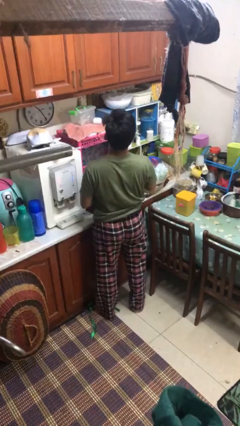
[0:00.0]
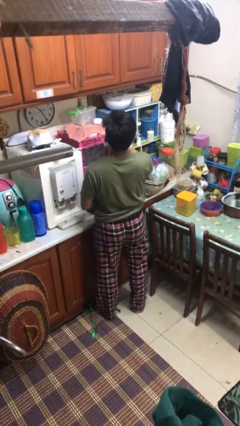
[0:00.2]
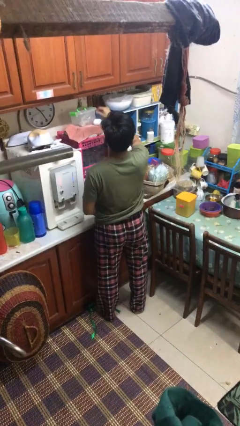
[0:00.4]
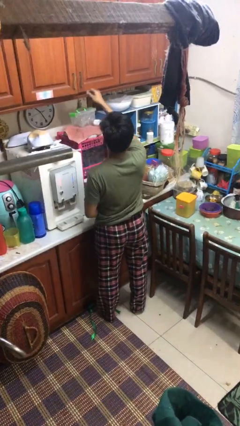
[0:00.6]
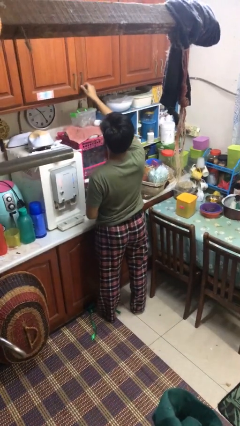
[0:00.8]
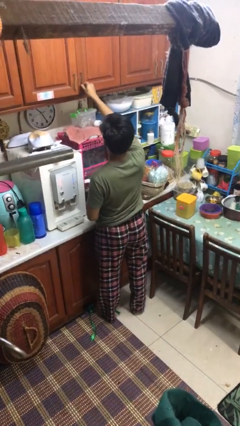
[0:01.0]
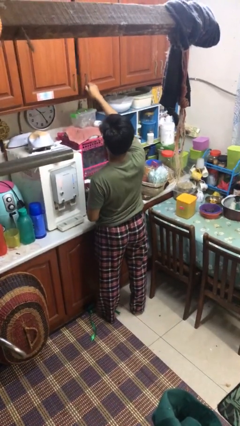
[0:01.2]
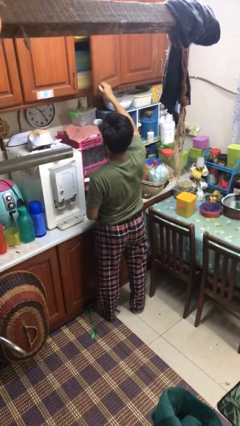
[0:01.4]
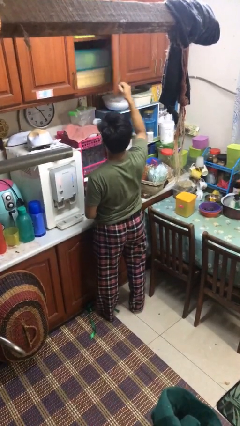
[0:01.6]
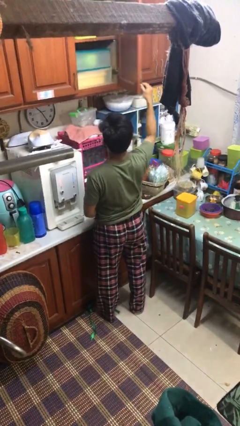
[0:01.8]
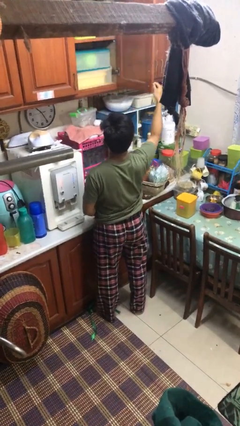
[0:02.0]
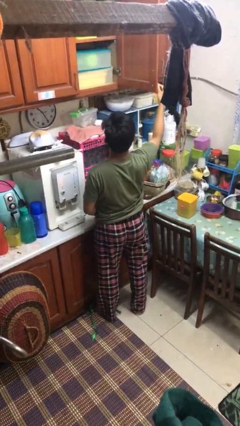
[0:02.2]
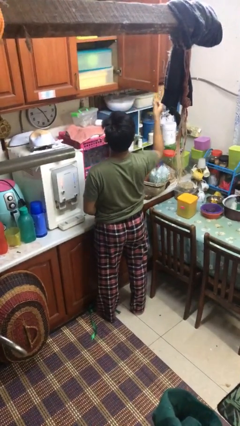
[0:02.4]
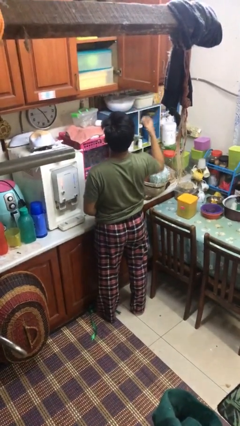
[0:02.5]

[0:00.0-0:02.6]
person opens kitchen drawer

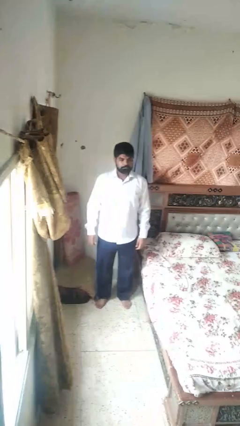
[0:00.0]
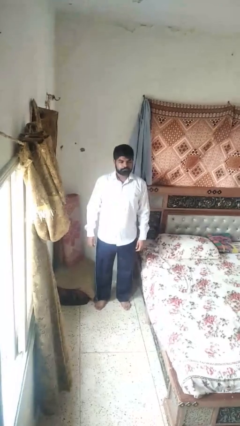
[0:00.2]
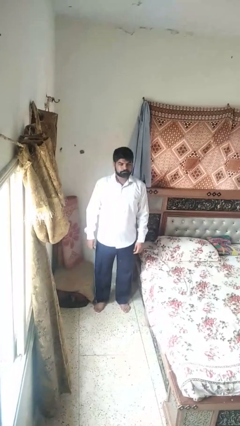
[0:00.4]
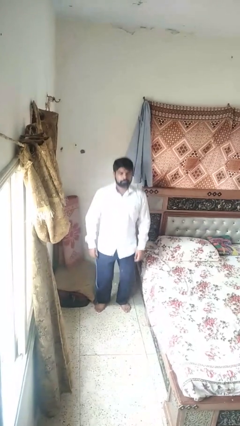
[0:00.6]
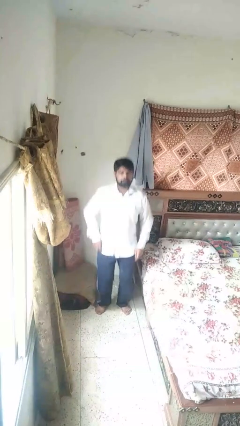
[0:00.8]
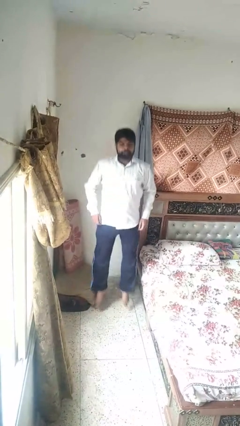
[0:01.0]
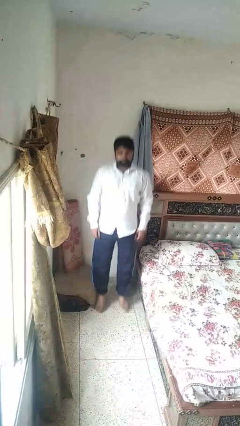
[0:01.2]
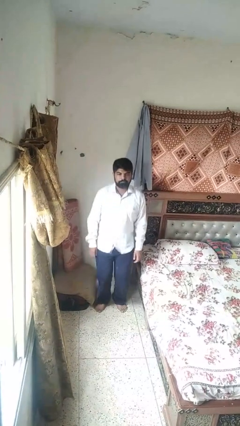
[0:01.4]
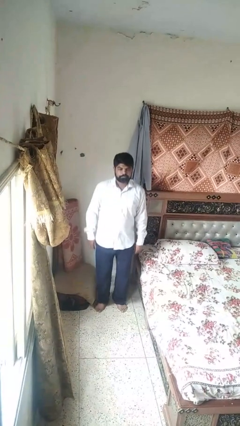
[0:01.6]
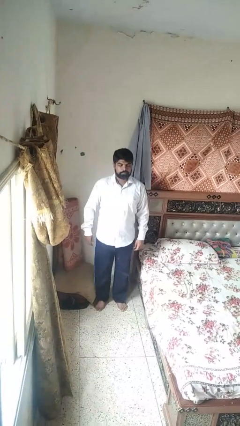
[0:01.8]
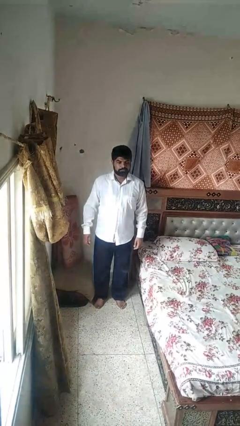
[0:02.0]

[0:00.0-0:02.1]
person jumps

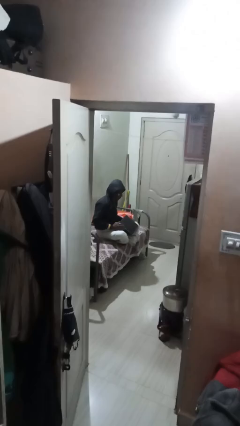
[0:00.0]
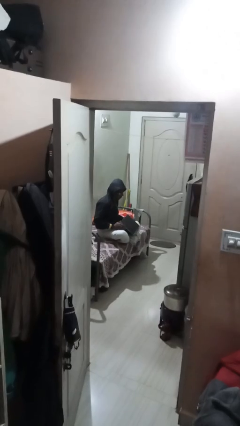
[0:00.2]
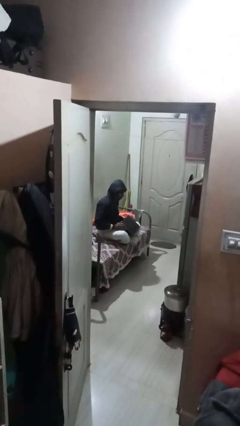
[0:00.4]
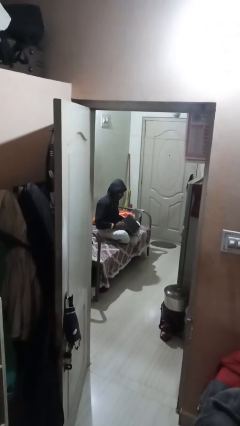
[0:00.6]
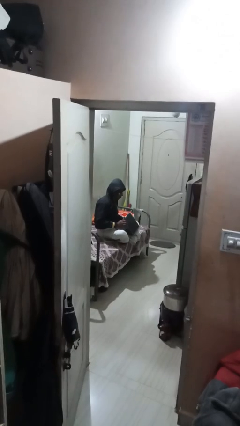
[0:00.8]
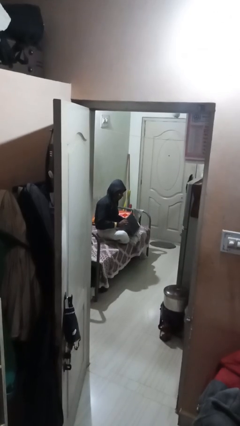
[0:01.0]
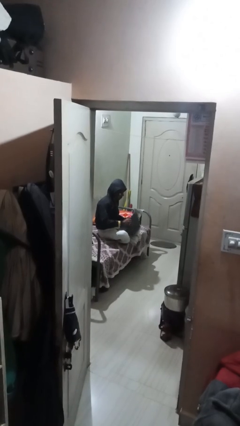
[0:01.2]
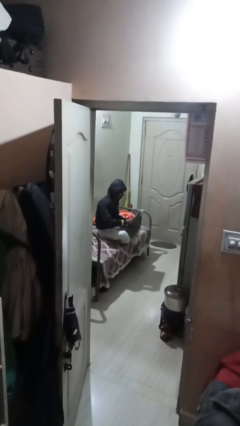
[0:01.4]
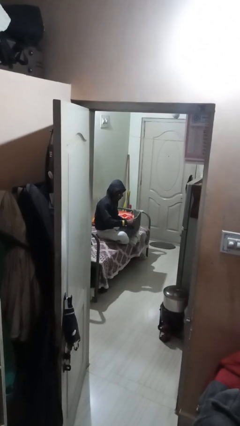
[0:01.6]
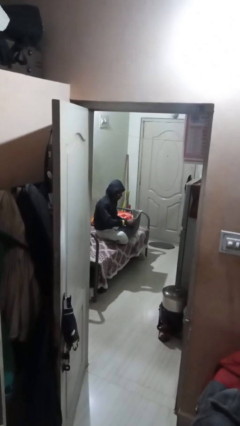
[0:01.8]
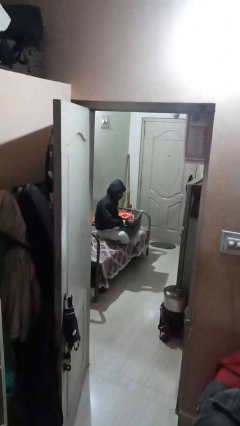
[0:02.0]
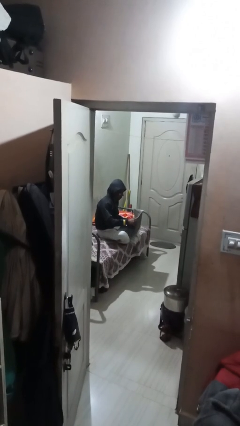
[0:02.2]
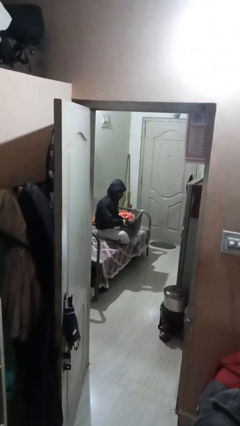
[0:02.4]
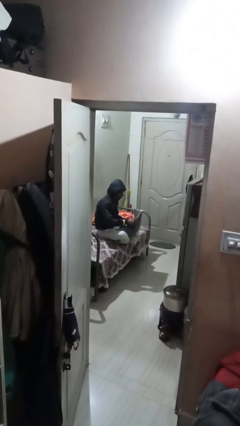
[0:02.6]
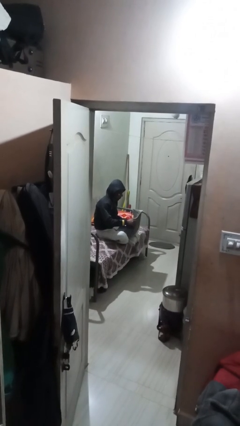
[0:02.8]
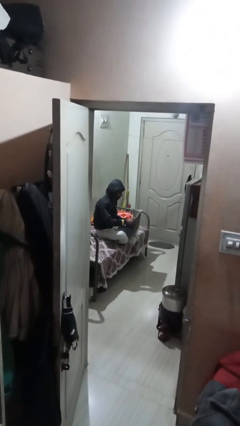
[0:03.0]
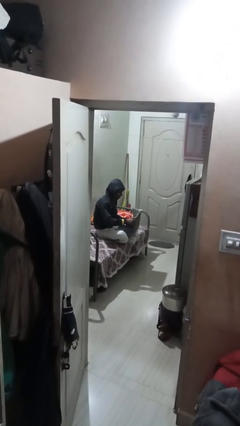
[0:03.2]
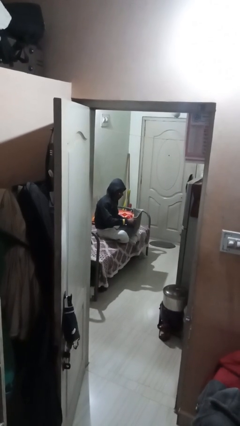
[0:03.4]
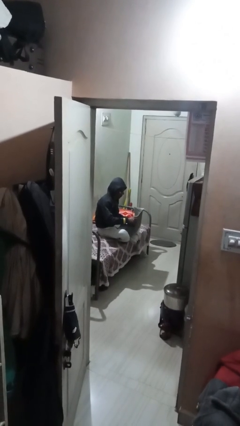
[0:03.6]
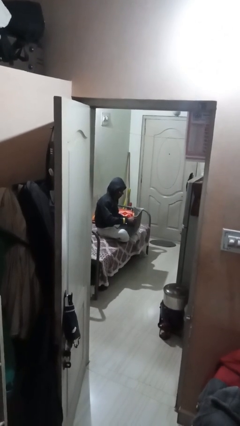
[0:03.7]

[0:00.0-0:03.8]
person interacts with laptop

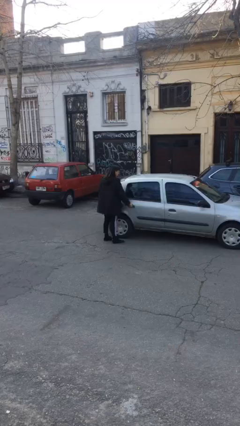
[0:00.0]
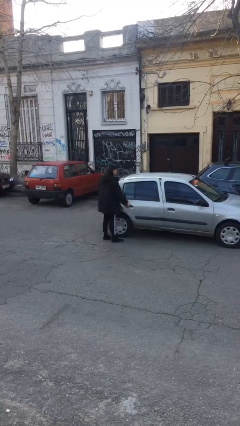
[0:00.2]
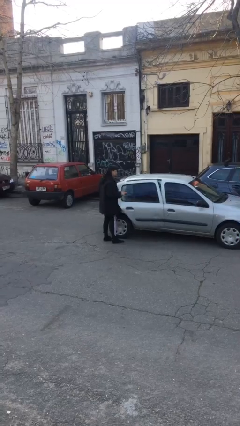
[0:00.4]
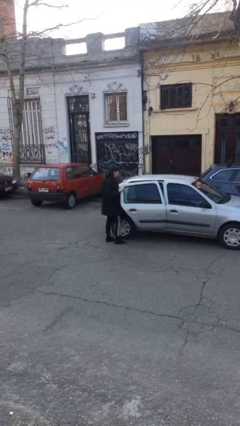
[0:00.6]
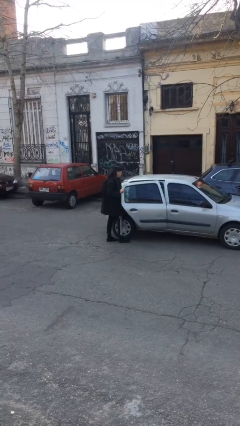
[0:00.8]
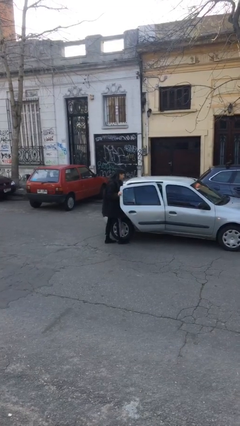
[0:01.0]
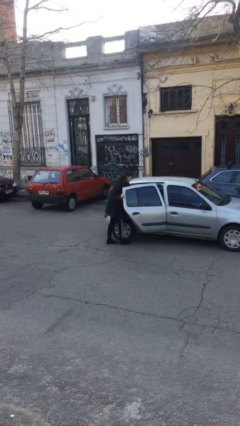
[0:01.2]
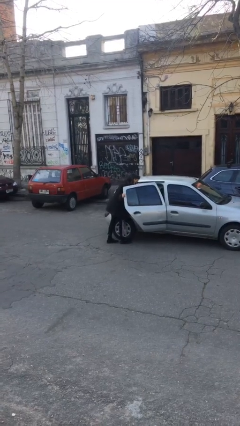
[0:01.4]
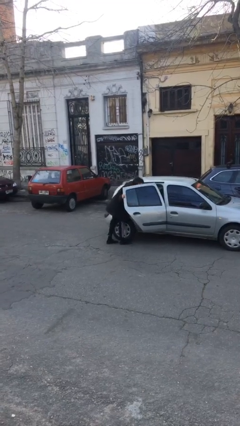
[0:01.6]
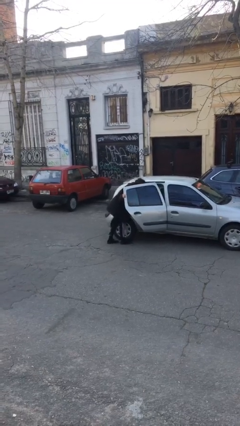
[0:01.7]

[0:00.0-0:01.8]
person opens car door

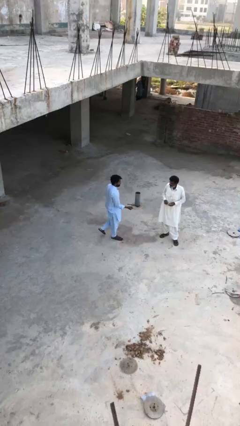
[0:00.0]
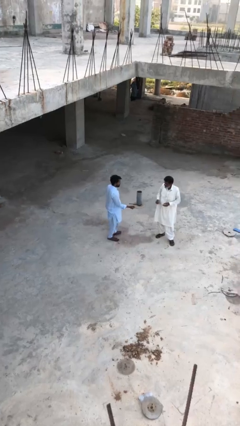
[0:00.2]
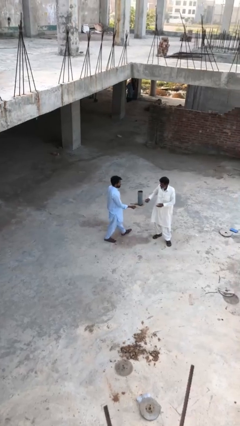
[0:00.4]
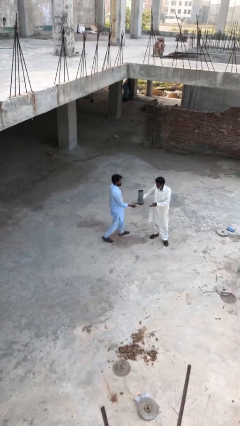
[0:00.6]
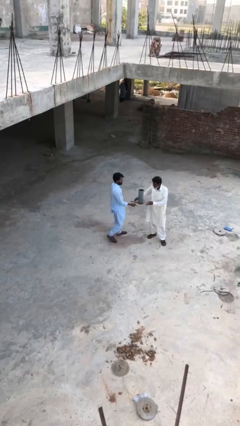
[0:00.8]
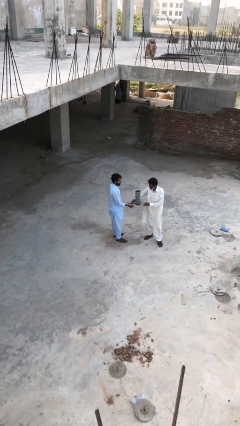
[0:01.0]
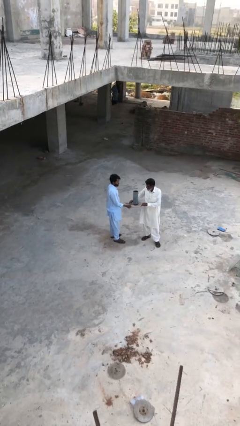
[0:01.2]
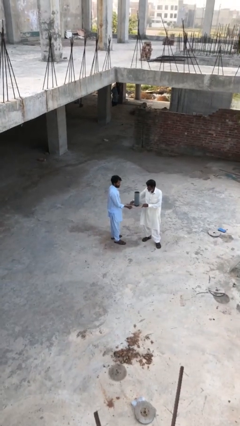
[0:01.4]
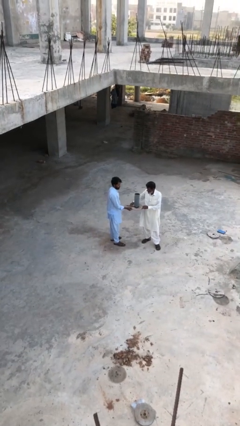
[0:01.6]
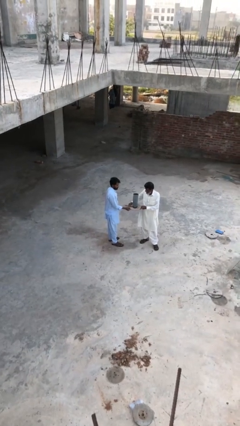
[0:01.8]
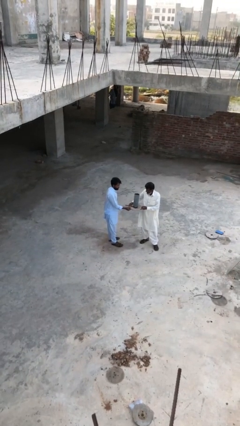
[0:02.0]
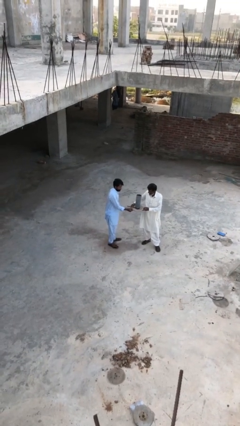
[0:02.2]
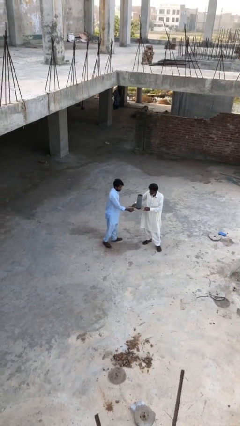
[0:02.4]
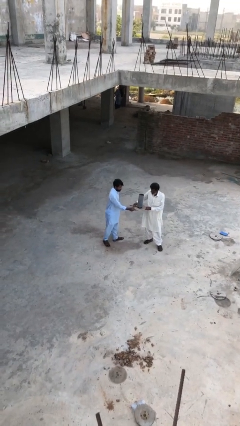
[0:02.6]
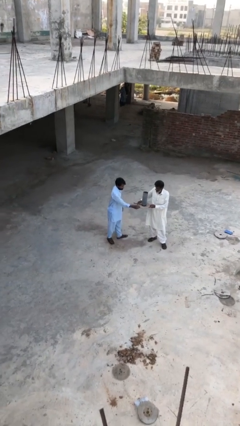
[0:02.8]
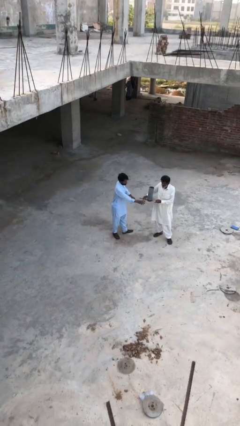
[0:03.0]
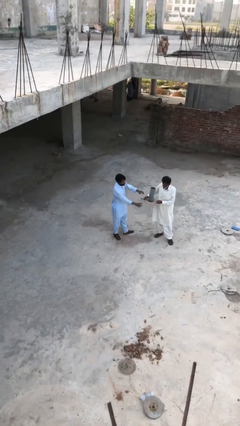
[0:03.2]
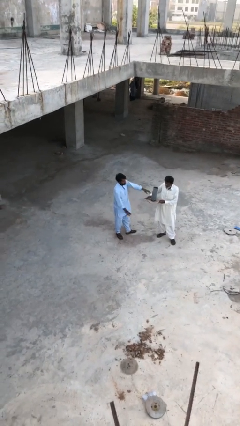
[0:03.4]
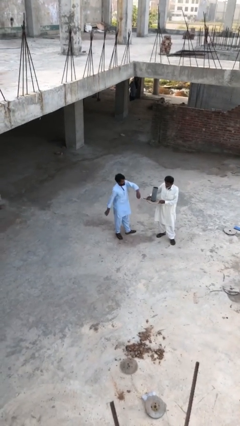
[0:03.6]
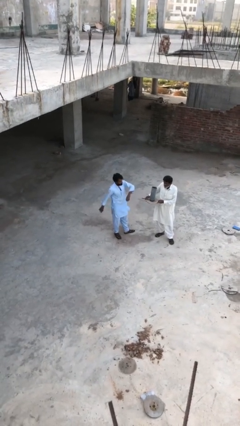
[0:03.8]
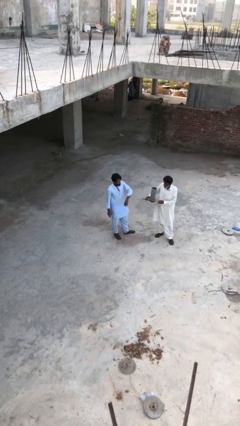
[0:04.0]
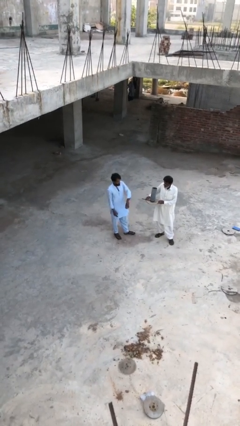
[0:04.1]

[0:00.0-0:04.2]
person transfers object to person

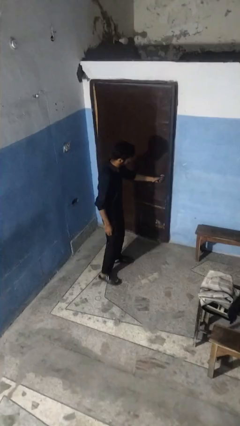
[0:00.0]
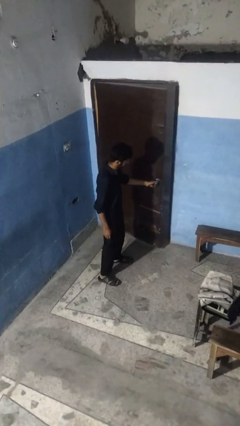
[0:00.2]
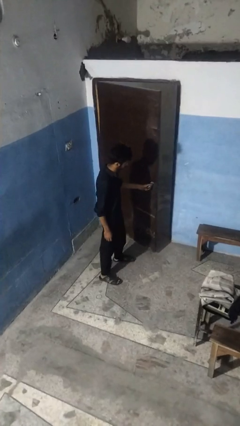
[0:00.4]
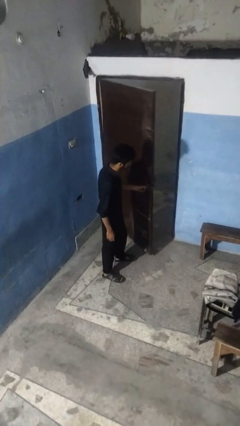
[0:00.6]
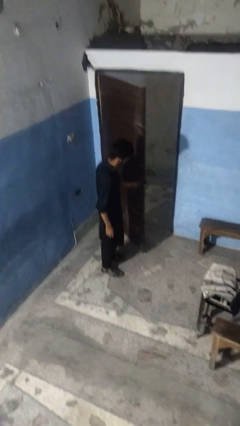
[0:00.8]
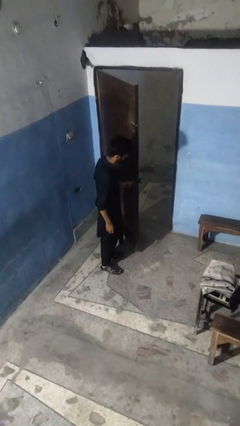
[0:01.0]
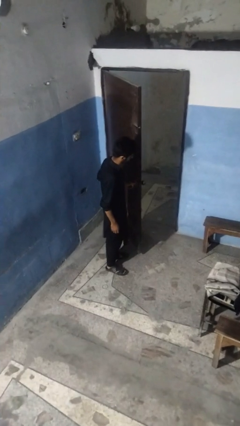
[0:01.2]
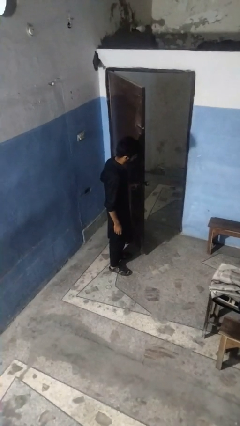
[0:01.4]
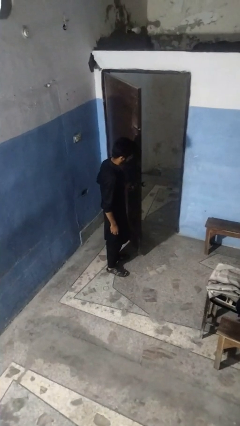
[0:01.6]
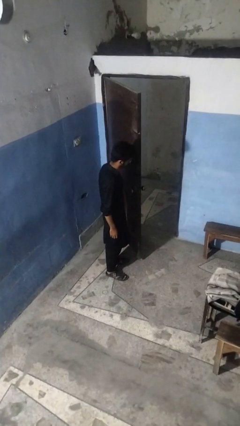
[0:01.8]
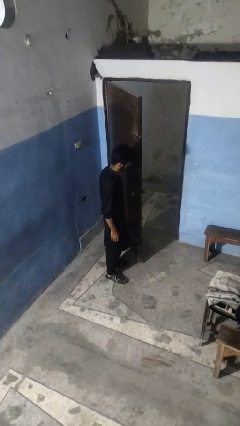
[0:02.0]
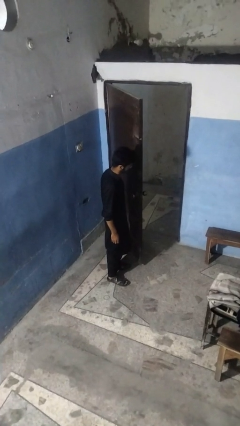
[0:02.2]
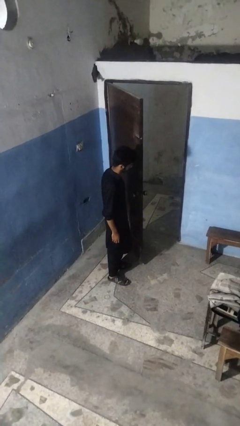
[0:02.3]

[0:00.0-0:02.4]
person opens facility door

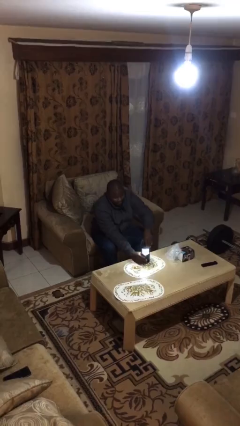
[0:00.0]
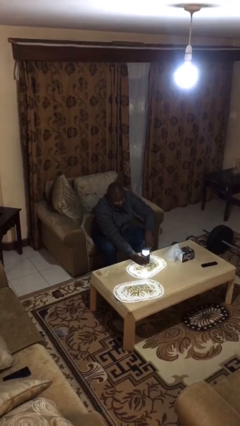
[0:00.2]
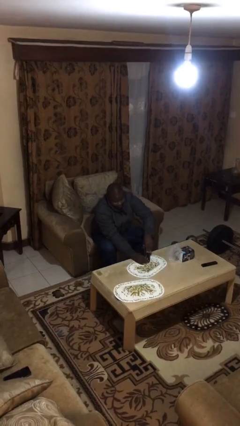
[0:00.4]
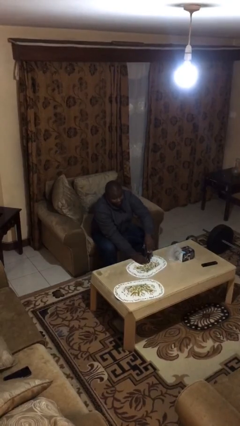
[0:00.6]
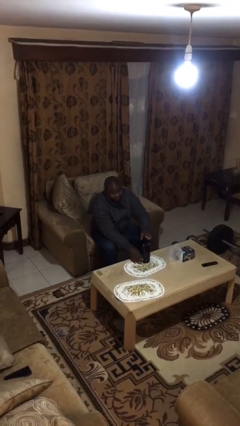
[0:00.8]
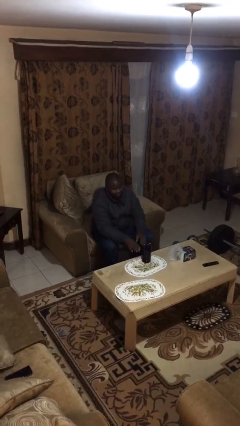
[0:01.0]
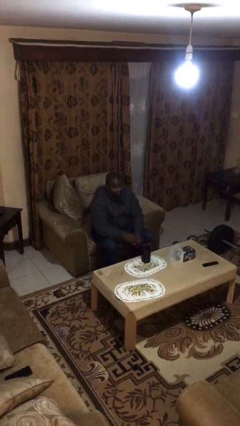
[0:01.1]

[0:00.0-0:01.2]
person turns off lamp
